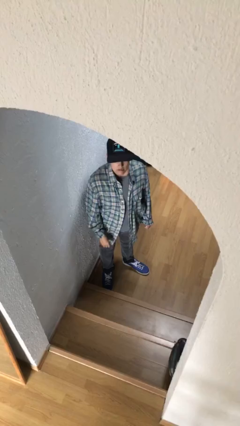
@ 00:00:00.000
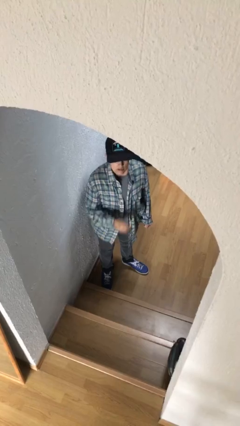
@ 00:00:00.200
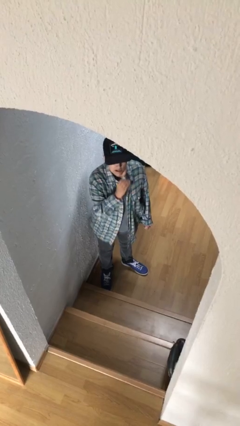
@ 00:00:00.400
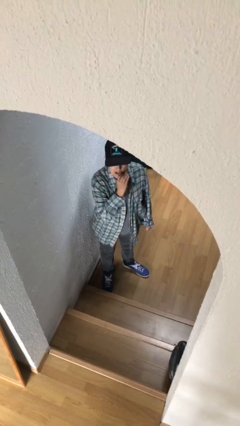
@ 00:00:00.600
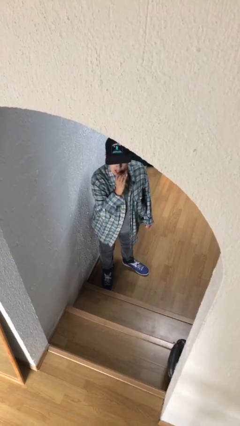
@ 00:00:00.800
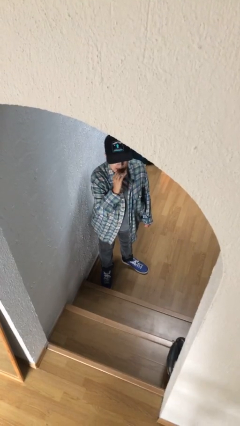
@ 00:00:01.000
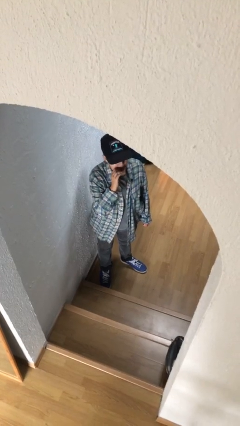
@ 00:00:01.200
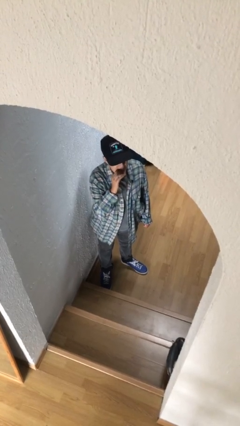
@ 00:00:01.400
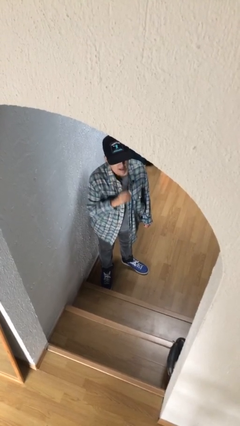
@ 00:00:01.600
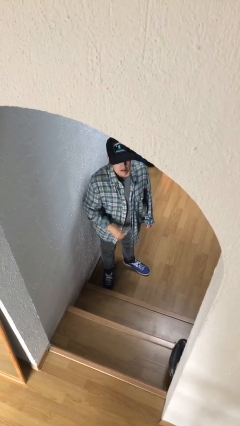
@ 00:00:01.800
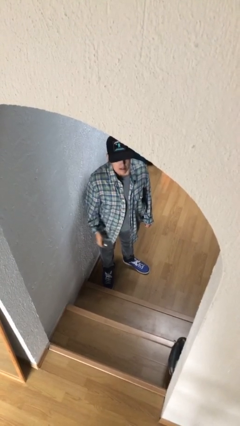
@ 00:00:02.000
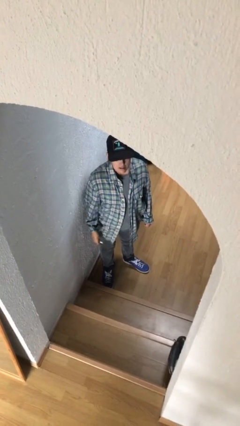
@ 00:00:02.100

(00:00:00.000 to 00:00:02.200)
person applies lip makeup

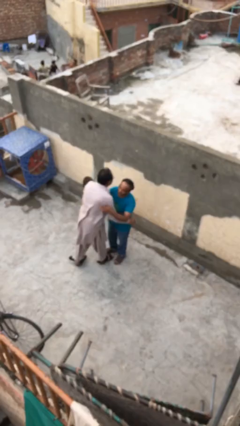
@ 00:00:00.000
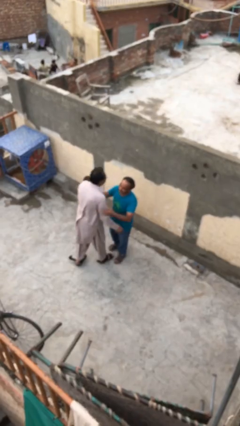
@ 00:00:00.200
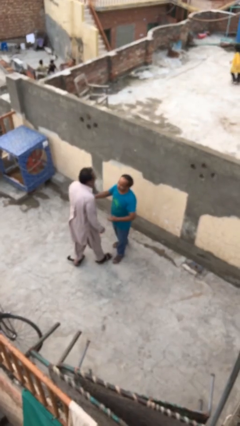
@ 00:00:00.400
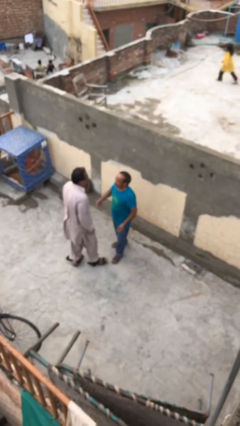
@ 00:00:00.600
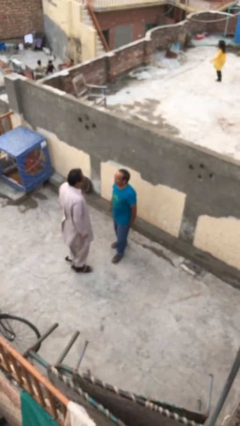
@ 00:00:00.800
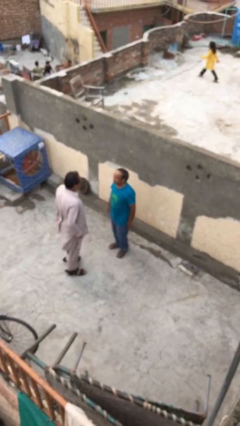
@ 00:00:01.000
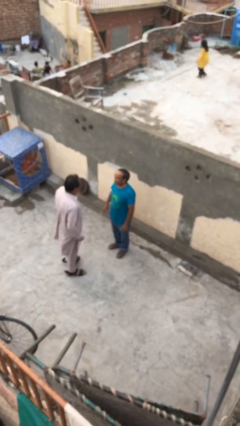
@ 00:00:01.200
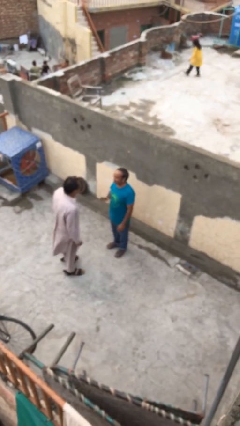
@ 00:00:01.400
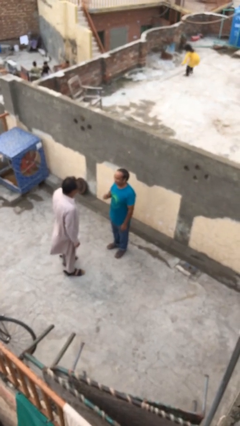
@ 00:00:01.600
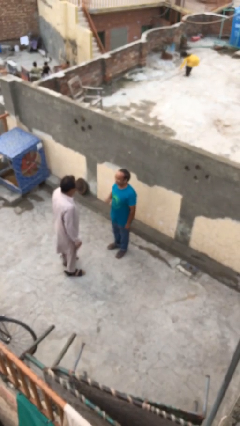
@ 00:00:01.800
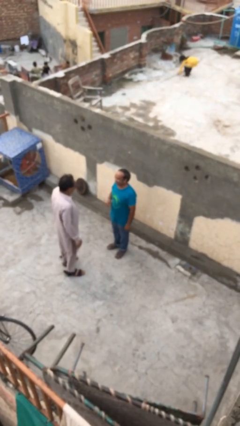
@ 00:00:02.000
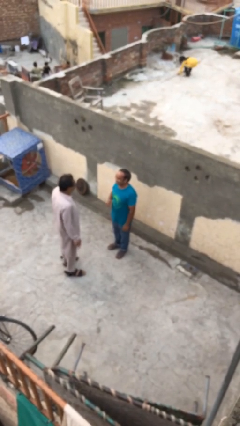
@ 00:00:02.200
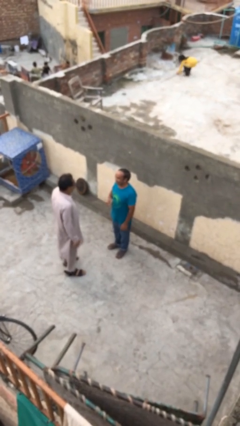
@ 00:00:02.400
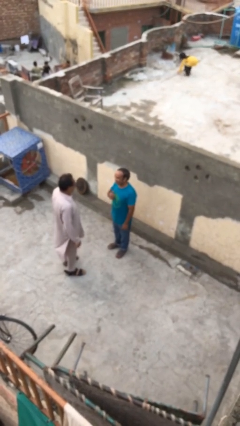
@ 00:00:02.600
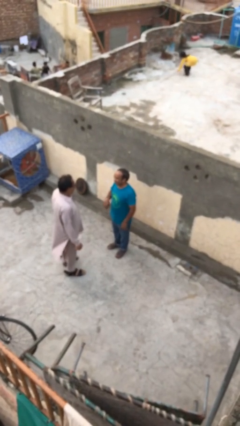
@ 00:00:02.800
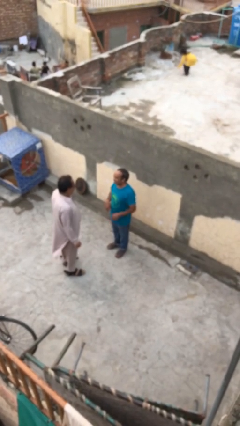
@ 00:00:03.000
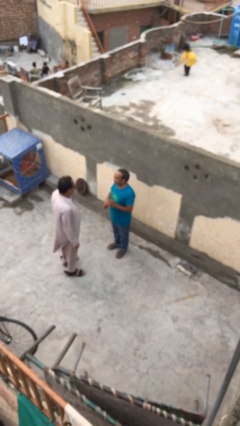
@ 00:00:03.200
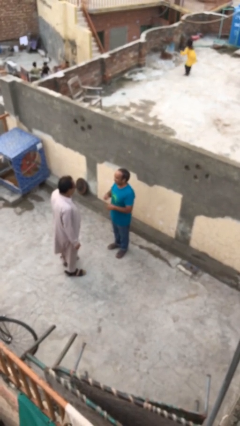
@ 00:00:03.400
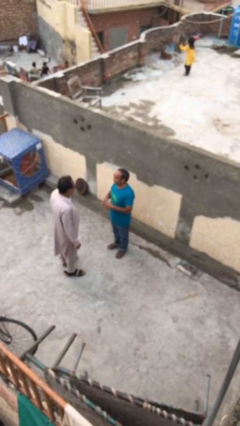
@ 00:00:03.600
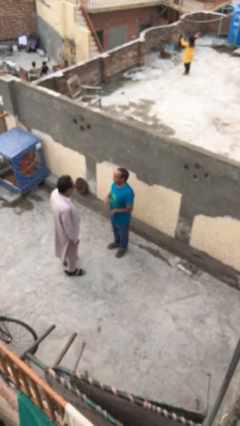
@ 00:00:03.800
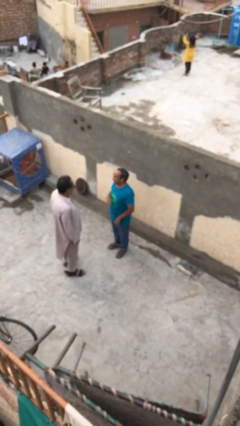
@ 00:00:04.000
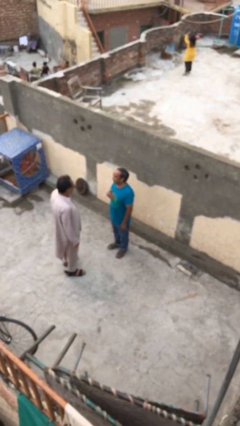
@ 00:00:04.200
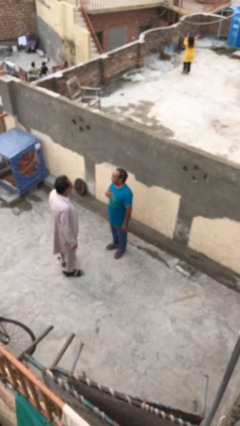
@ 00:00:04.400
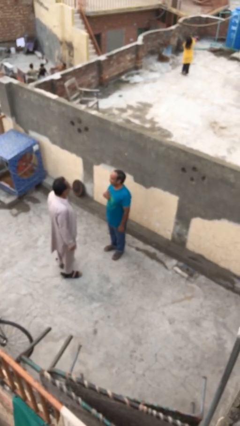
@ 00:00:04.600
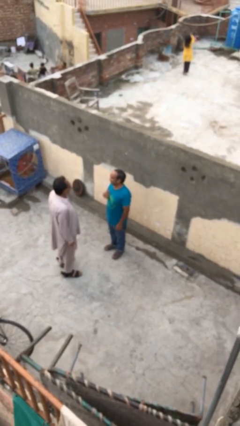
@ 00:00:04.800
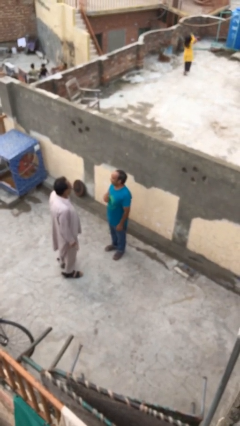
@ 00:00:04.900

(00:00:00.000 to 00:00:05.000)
person talks to person

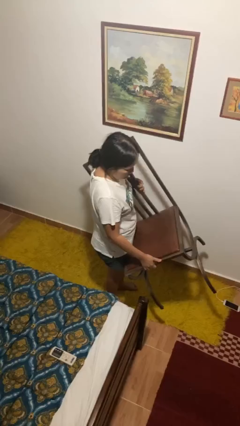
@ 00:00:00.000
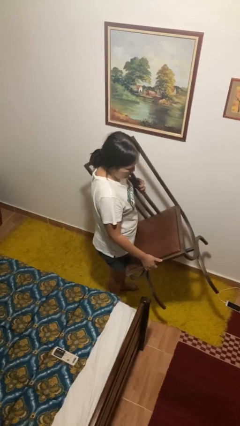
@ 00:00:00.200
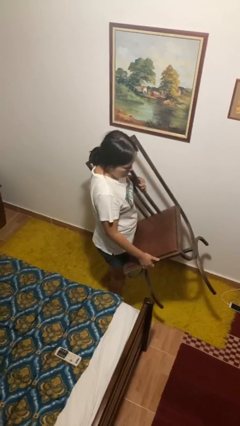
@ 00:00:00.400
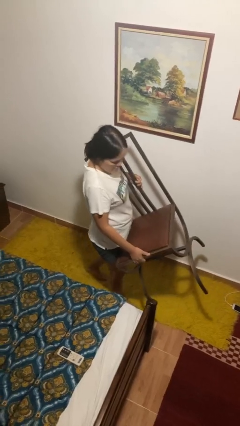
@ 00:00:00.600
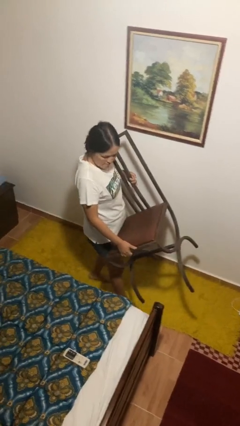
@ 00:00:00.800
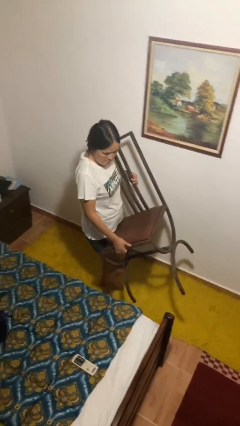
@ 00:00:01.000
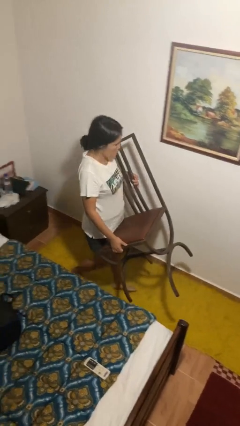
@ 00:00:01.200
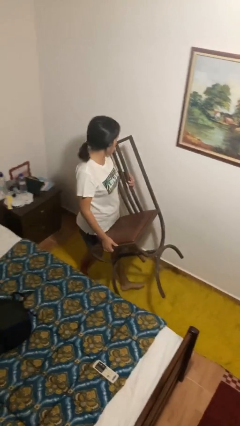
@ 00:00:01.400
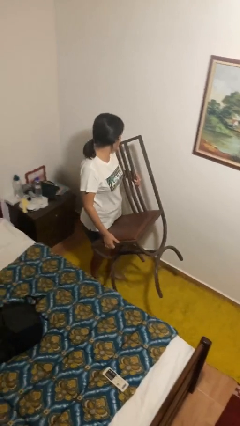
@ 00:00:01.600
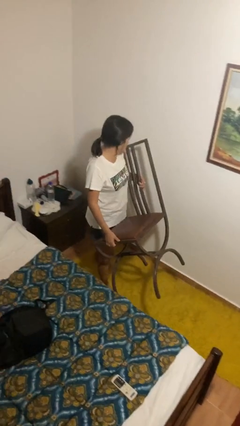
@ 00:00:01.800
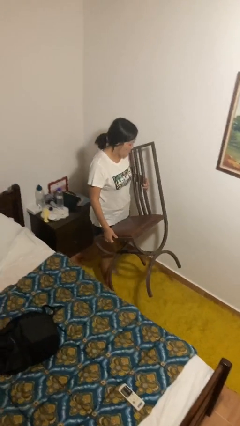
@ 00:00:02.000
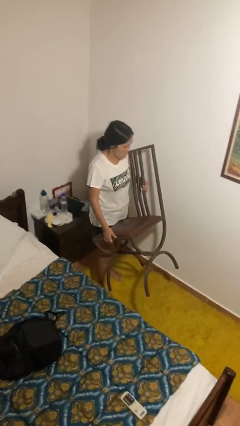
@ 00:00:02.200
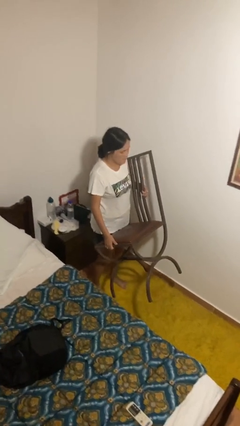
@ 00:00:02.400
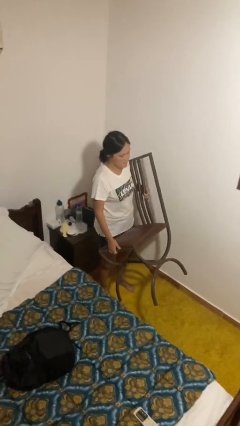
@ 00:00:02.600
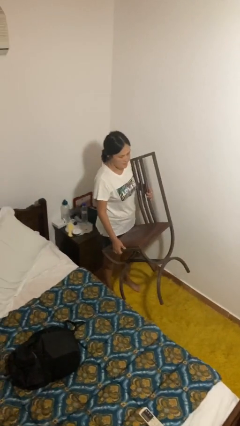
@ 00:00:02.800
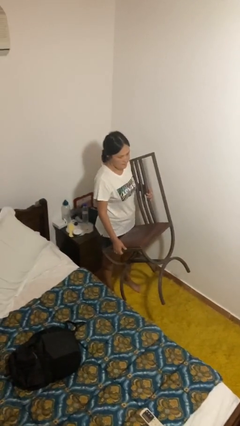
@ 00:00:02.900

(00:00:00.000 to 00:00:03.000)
person carries furniture

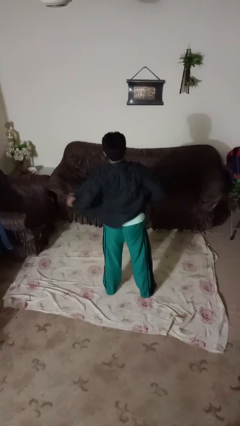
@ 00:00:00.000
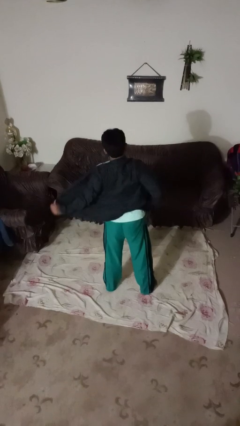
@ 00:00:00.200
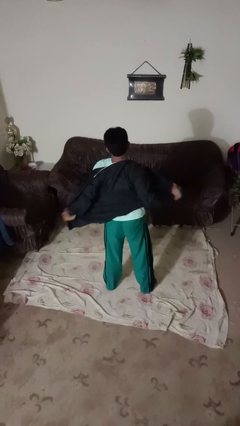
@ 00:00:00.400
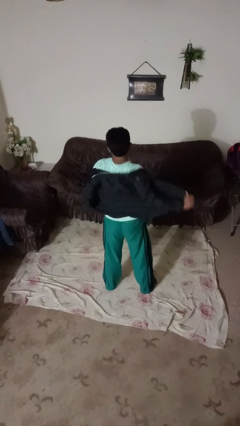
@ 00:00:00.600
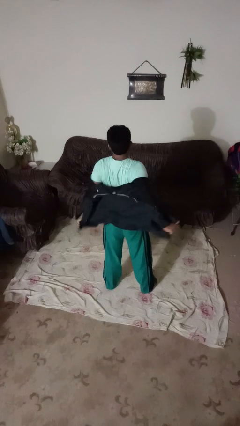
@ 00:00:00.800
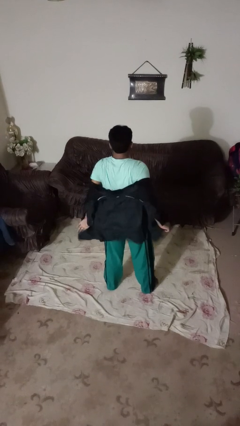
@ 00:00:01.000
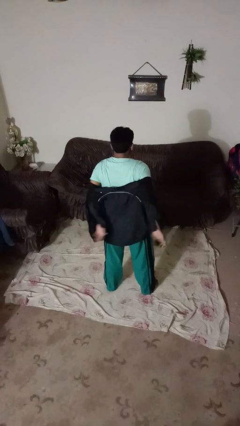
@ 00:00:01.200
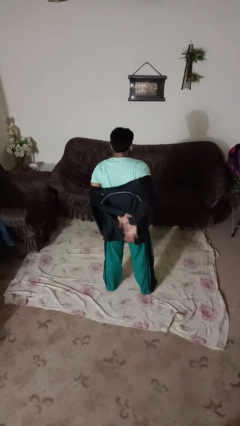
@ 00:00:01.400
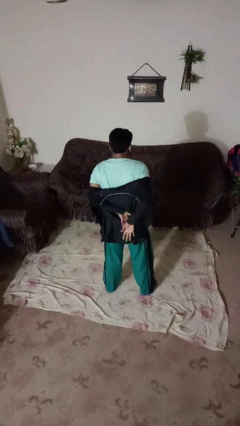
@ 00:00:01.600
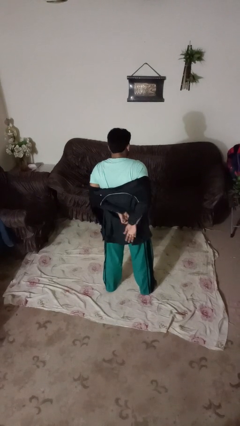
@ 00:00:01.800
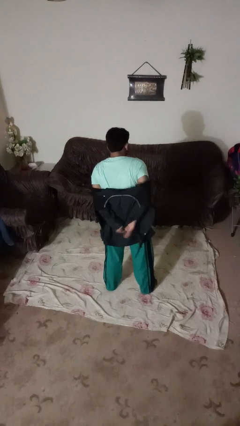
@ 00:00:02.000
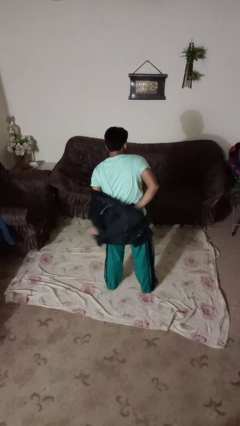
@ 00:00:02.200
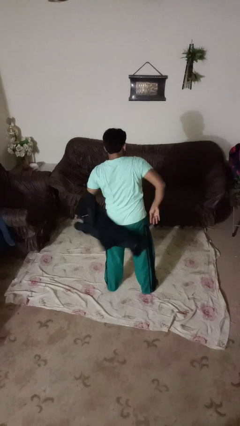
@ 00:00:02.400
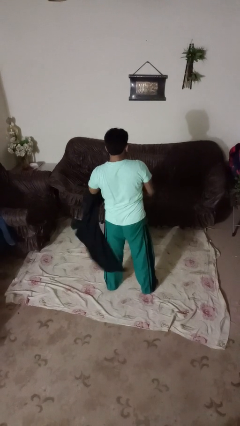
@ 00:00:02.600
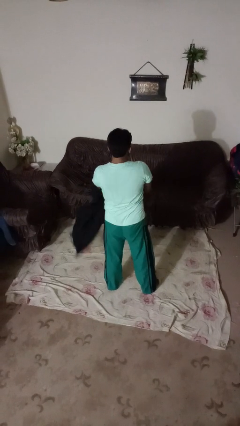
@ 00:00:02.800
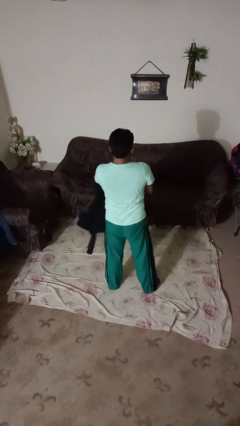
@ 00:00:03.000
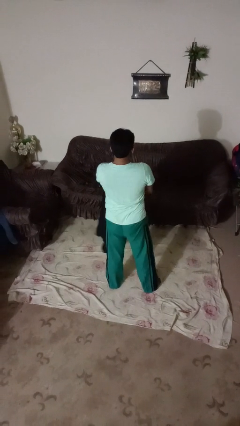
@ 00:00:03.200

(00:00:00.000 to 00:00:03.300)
person takes off shirt

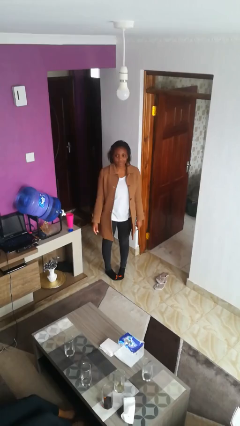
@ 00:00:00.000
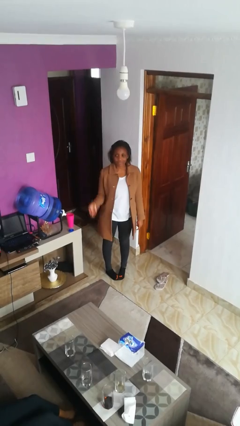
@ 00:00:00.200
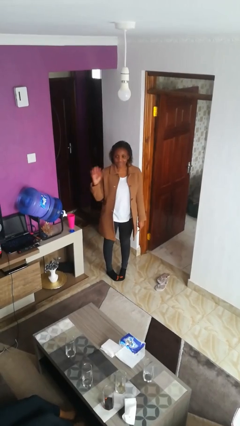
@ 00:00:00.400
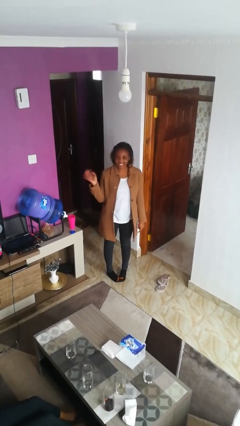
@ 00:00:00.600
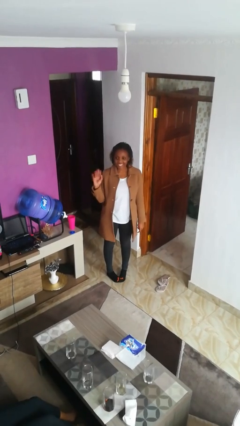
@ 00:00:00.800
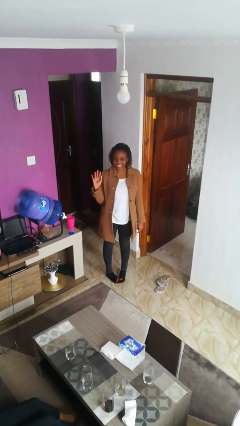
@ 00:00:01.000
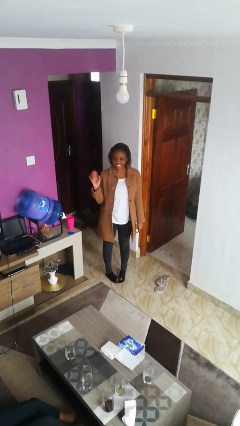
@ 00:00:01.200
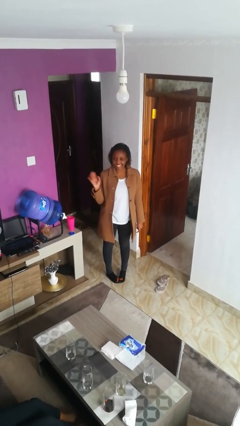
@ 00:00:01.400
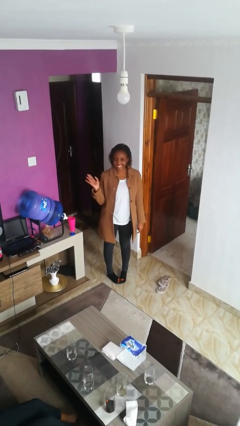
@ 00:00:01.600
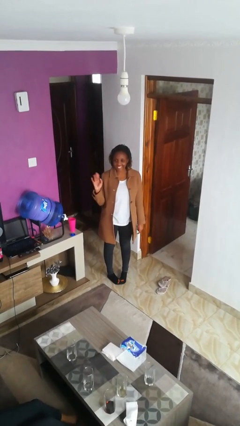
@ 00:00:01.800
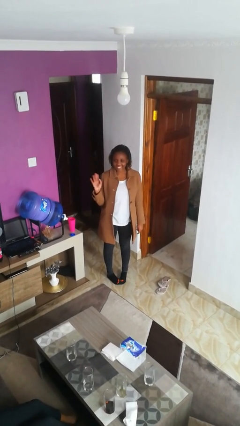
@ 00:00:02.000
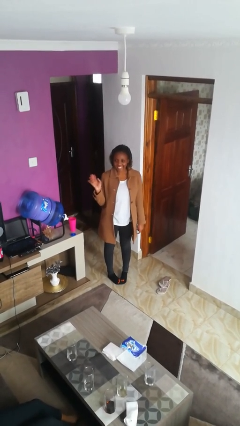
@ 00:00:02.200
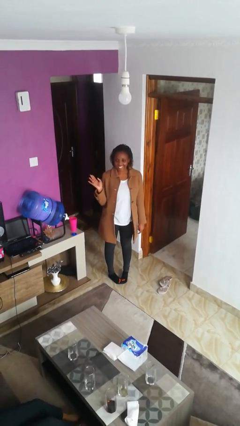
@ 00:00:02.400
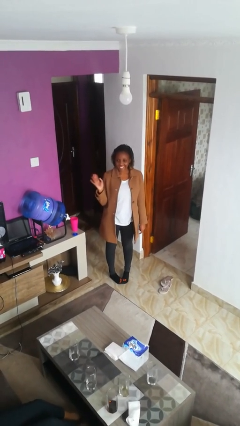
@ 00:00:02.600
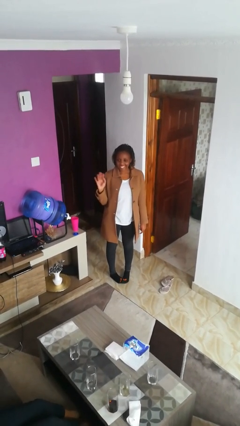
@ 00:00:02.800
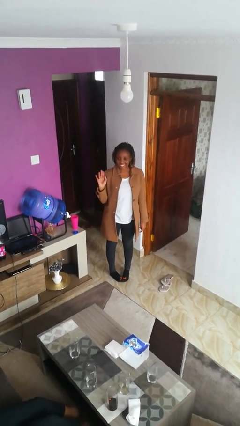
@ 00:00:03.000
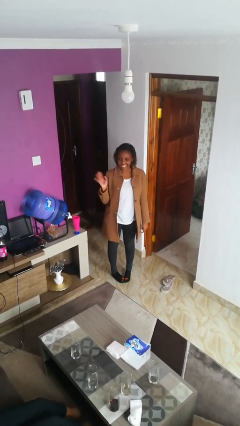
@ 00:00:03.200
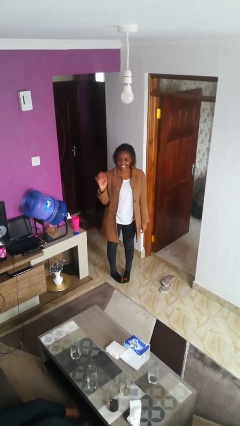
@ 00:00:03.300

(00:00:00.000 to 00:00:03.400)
person waves at person

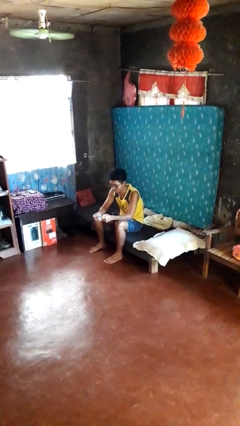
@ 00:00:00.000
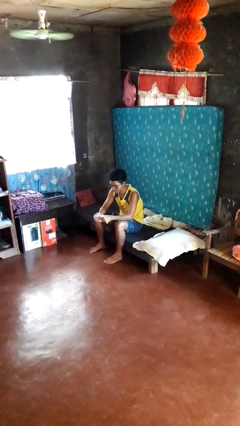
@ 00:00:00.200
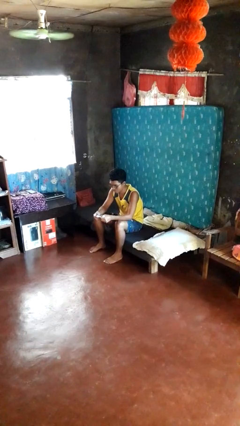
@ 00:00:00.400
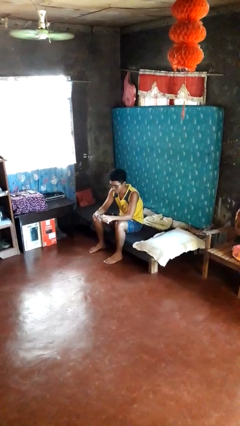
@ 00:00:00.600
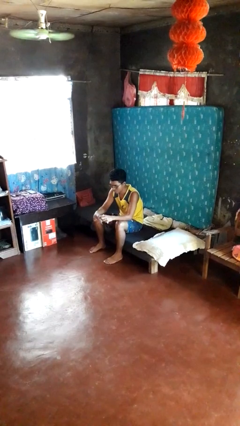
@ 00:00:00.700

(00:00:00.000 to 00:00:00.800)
person tears paper
